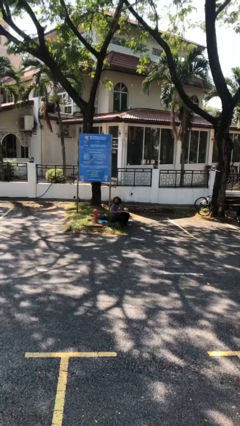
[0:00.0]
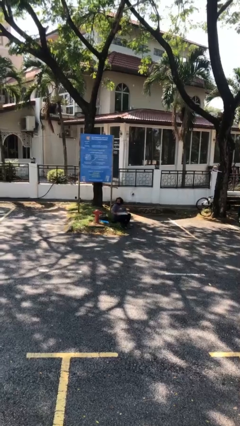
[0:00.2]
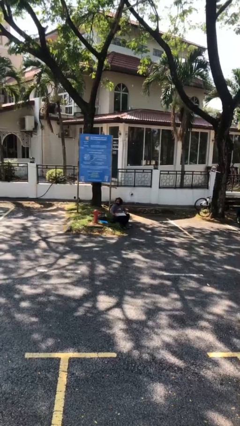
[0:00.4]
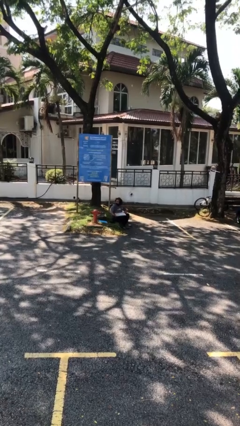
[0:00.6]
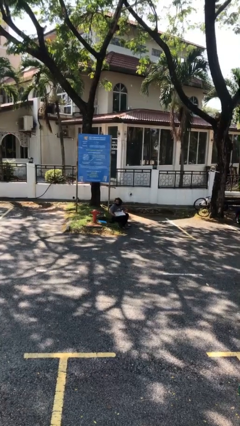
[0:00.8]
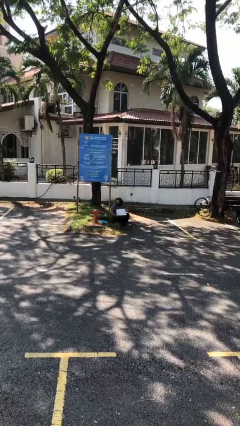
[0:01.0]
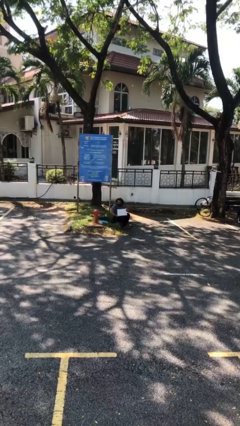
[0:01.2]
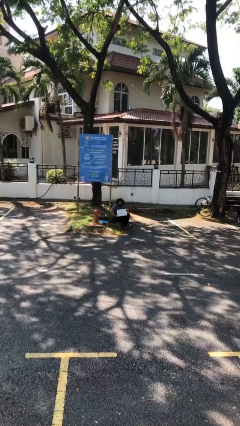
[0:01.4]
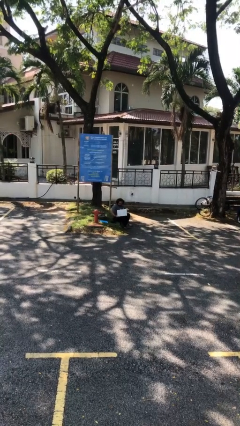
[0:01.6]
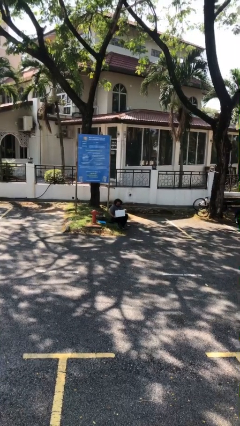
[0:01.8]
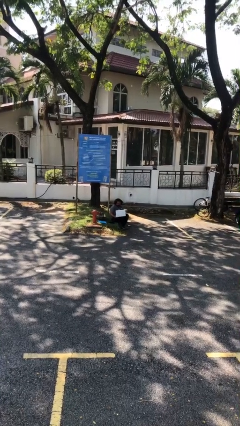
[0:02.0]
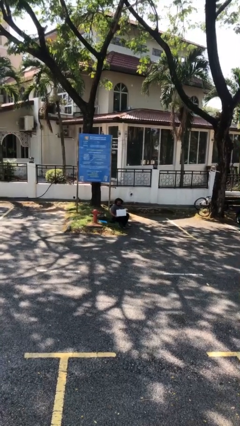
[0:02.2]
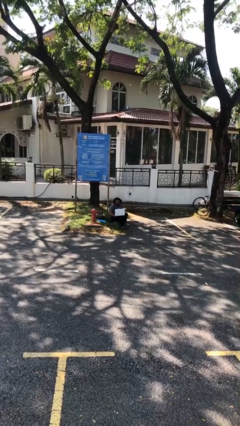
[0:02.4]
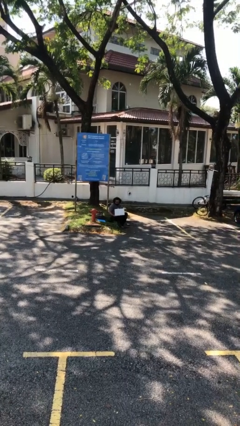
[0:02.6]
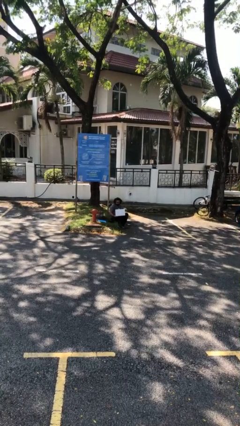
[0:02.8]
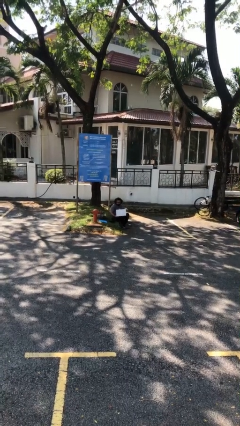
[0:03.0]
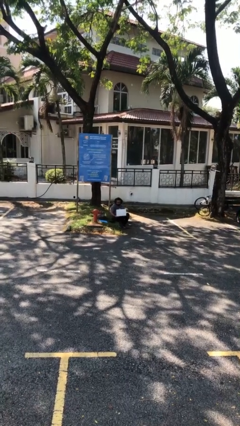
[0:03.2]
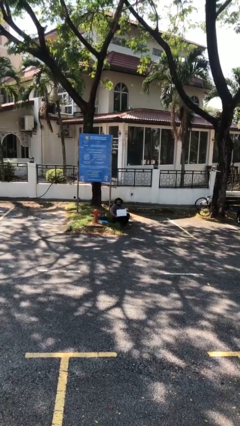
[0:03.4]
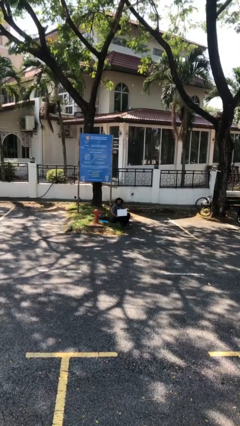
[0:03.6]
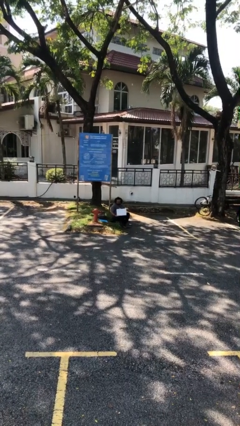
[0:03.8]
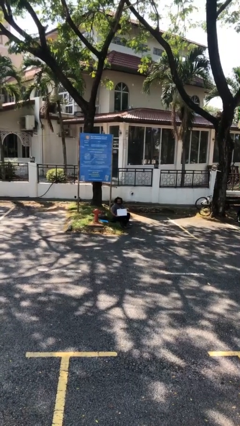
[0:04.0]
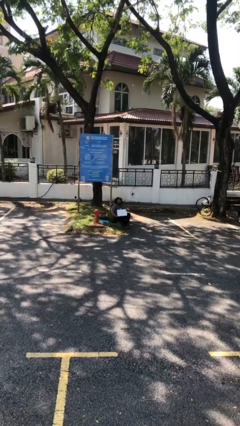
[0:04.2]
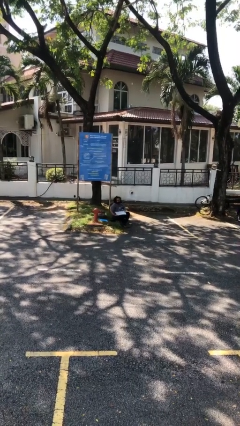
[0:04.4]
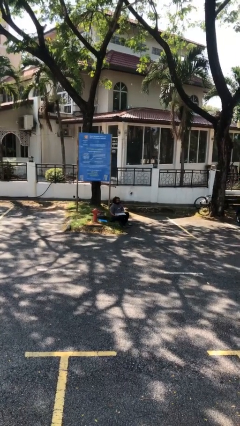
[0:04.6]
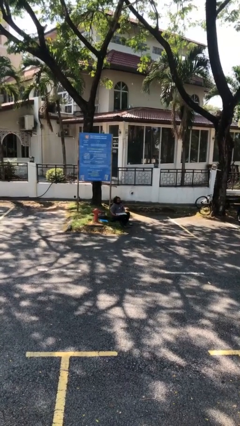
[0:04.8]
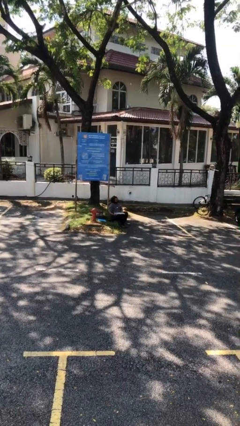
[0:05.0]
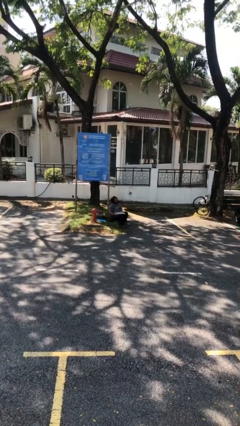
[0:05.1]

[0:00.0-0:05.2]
person interacts with laptop

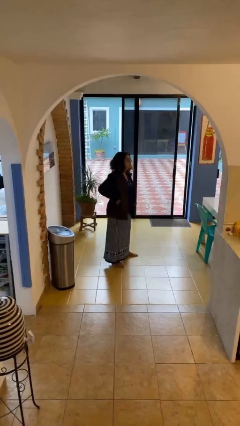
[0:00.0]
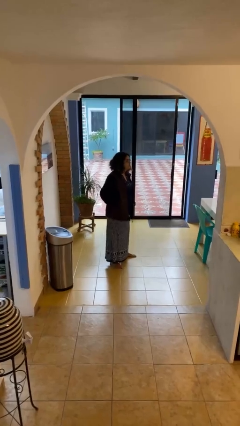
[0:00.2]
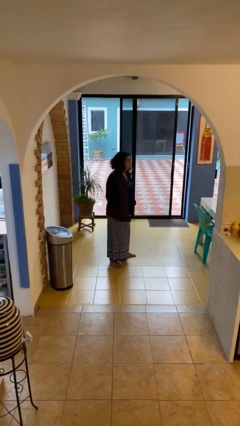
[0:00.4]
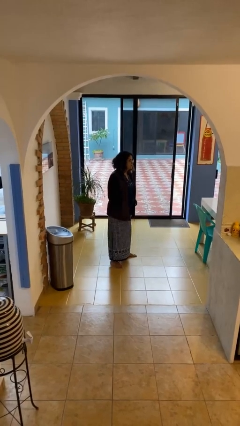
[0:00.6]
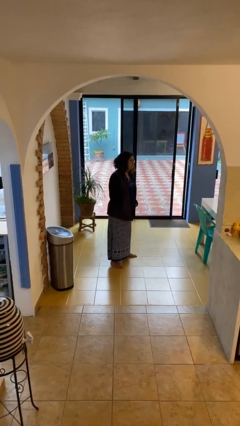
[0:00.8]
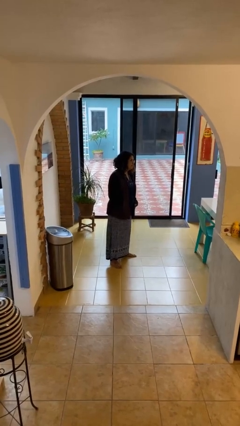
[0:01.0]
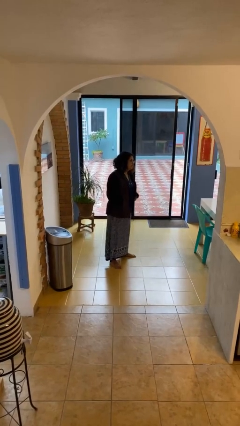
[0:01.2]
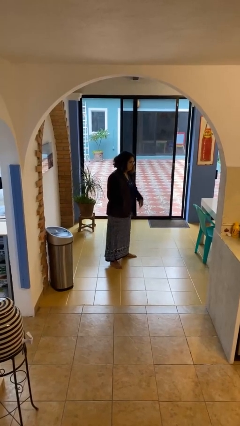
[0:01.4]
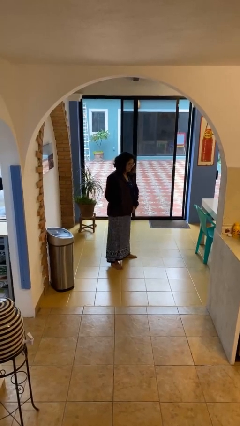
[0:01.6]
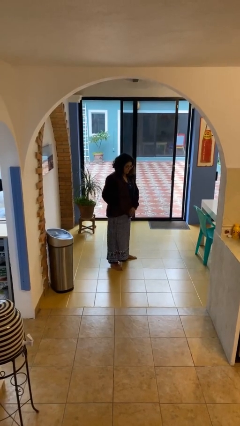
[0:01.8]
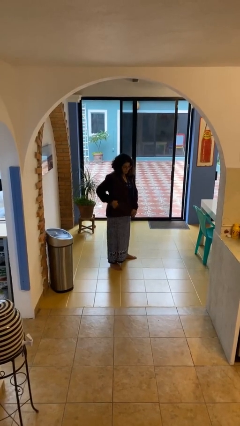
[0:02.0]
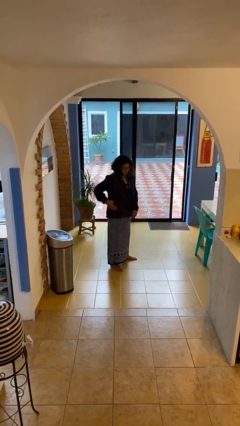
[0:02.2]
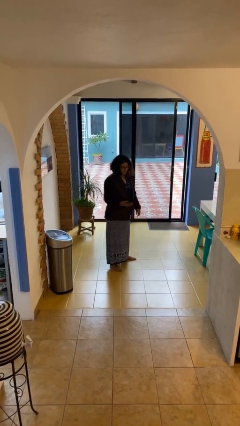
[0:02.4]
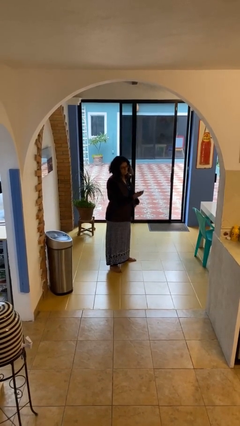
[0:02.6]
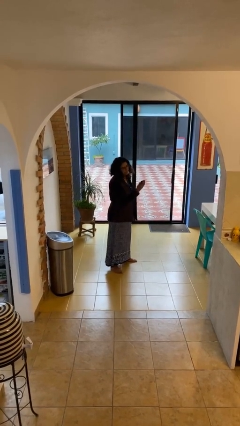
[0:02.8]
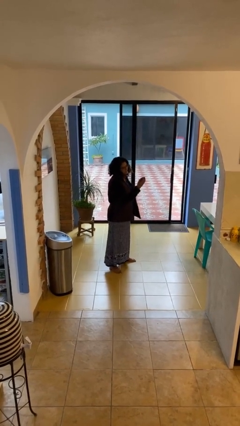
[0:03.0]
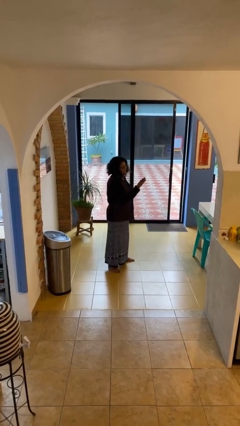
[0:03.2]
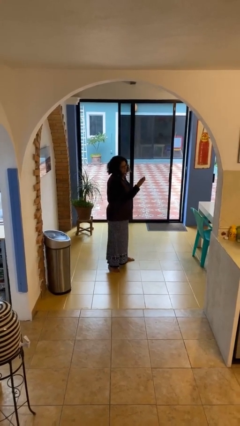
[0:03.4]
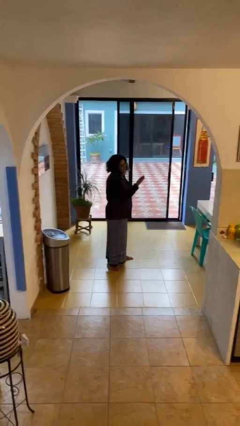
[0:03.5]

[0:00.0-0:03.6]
person takes phone from pocket

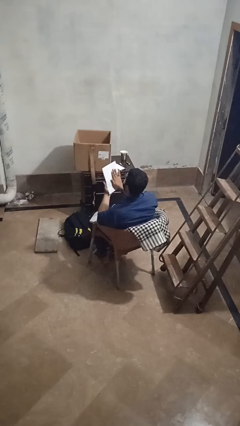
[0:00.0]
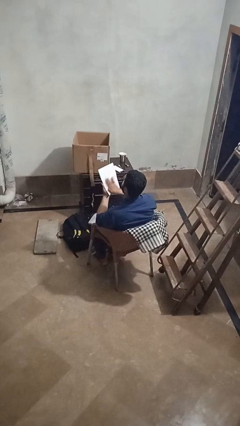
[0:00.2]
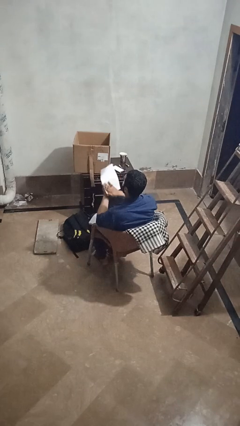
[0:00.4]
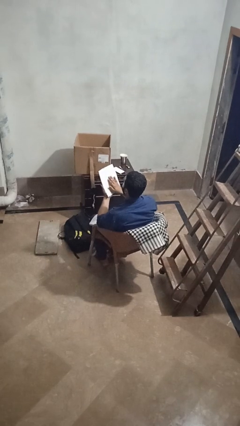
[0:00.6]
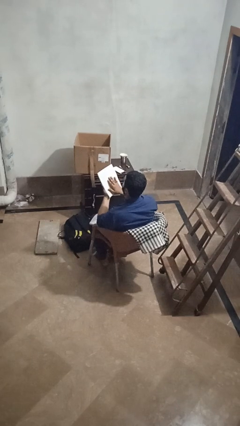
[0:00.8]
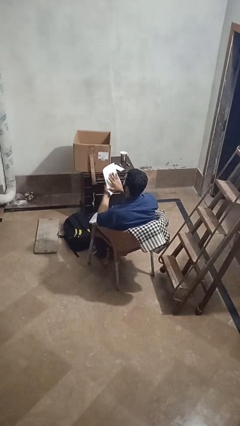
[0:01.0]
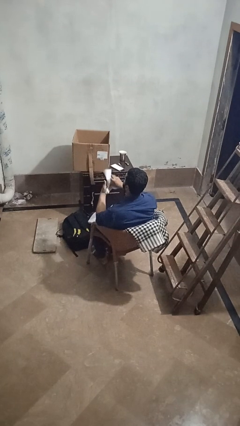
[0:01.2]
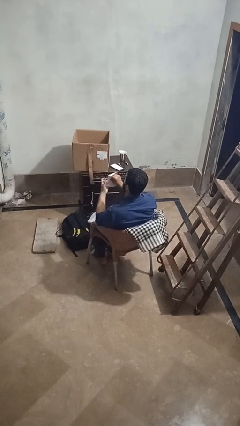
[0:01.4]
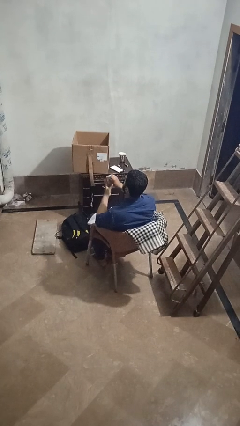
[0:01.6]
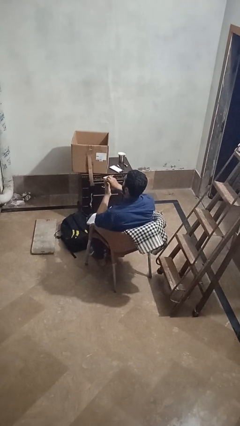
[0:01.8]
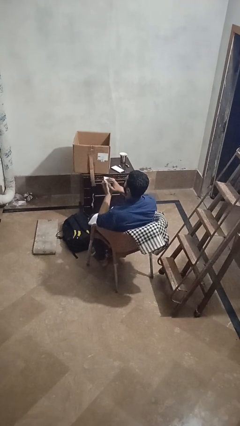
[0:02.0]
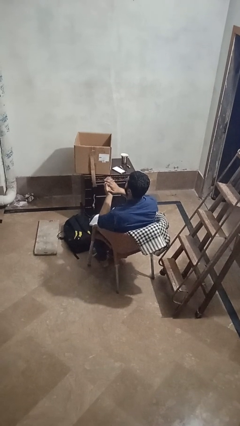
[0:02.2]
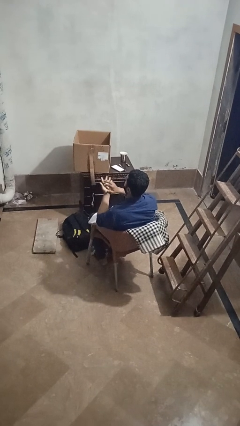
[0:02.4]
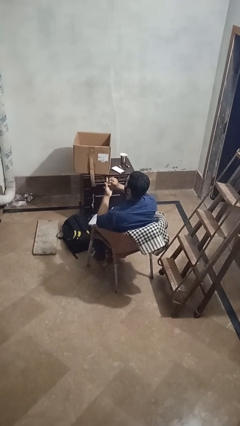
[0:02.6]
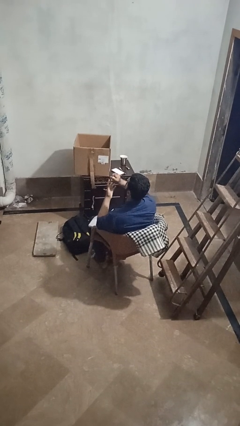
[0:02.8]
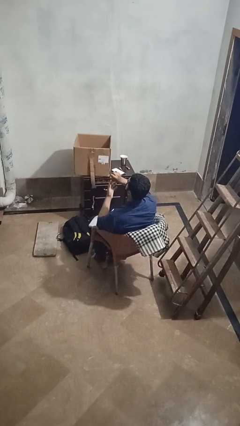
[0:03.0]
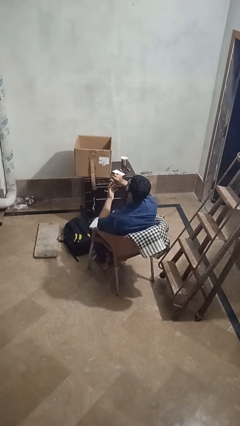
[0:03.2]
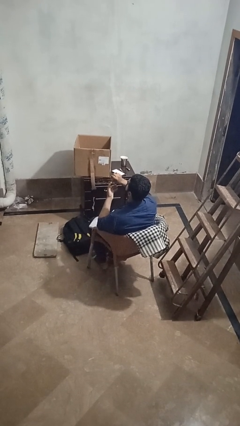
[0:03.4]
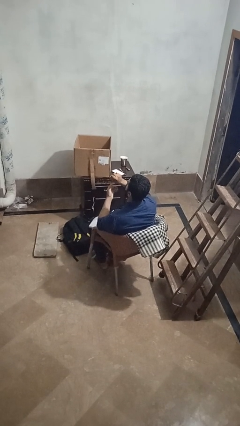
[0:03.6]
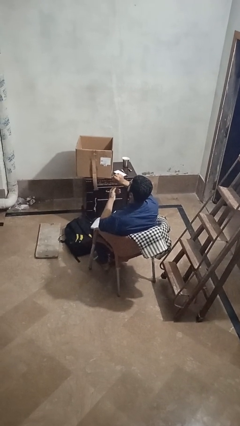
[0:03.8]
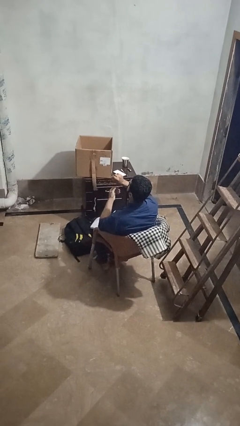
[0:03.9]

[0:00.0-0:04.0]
person crumples paper

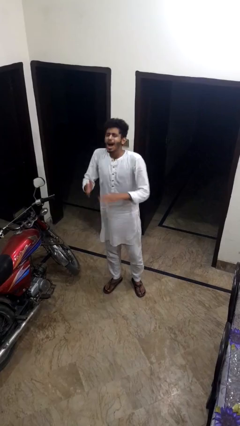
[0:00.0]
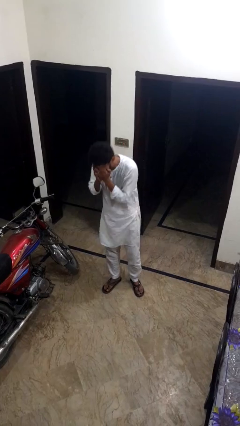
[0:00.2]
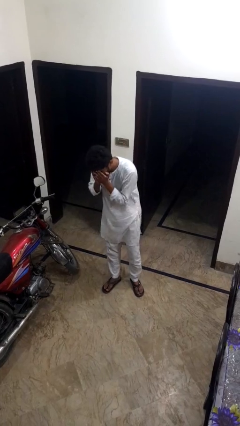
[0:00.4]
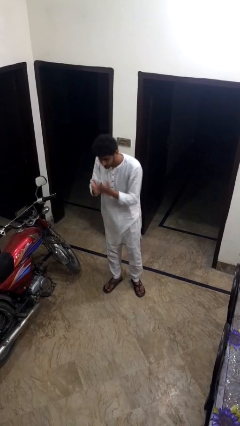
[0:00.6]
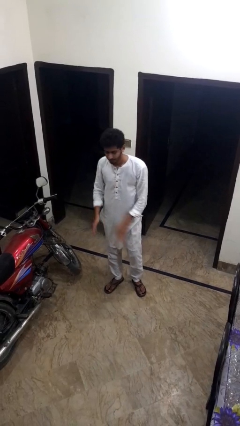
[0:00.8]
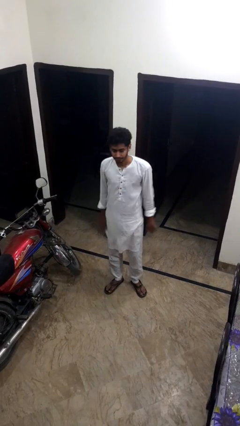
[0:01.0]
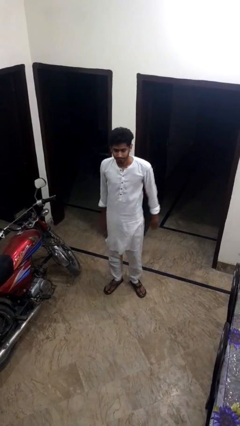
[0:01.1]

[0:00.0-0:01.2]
person sneezes into hand

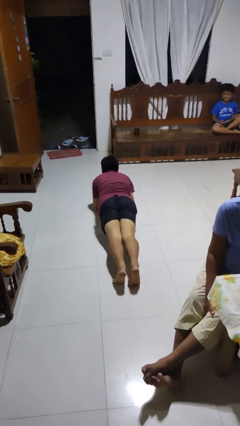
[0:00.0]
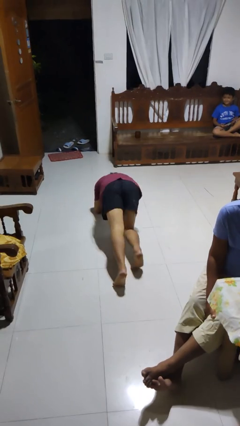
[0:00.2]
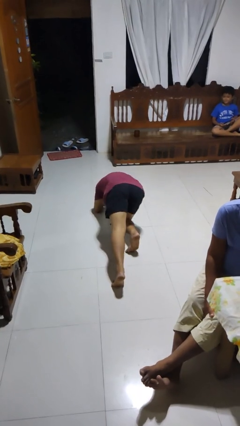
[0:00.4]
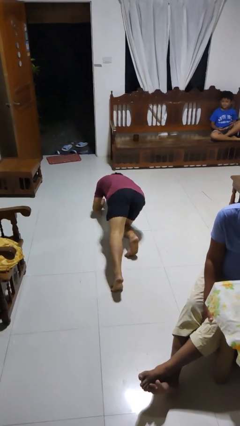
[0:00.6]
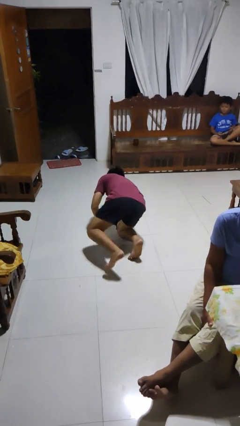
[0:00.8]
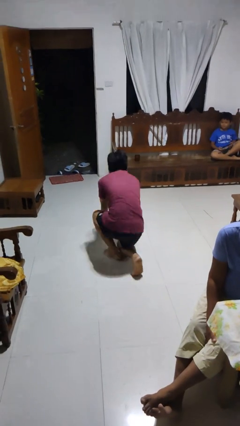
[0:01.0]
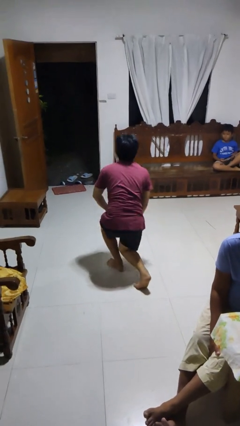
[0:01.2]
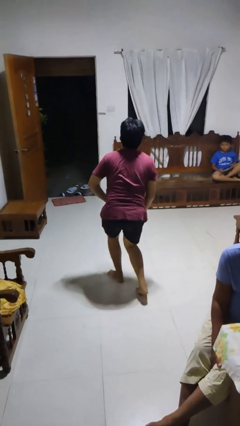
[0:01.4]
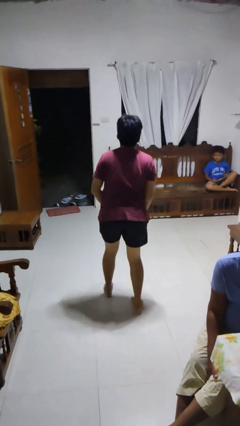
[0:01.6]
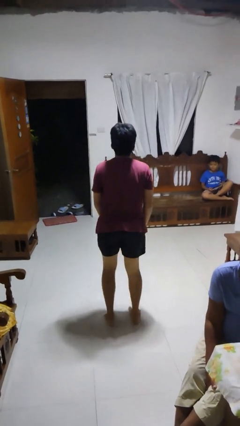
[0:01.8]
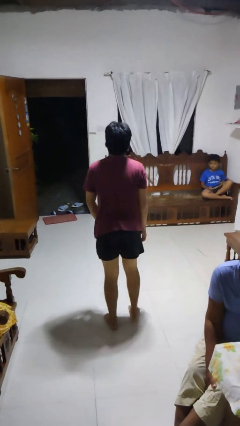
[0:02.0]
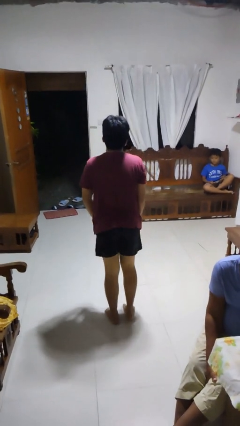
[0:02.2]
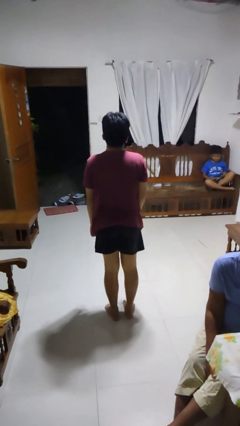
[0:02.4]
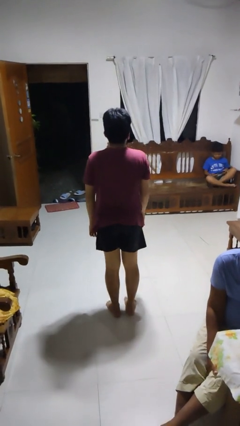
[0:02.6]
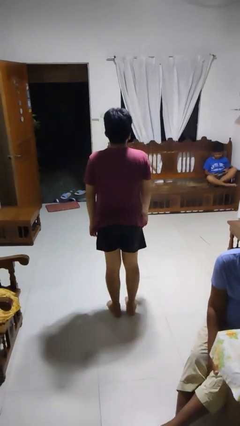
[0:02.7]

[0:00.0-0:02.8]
person stands up from floor

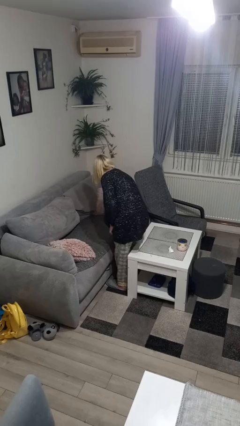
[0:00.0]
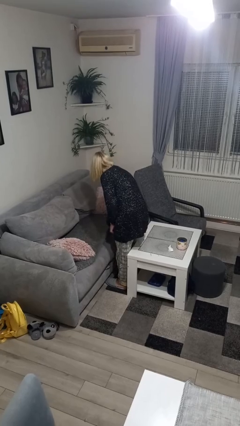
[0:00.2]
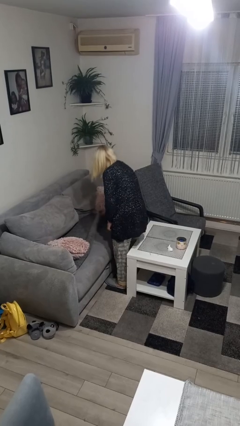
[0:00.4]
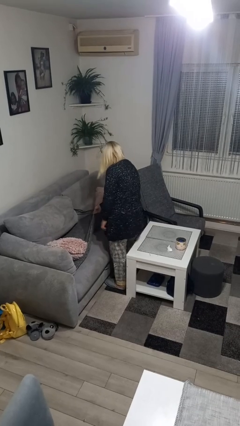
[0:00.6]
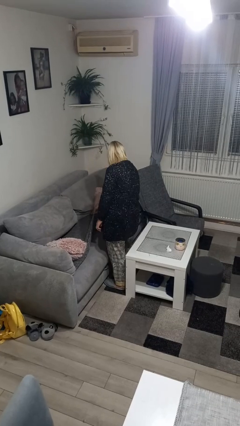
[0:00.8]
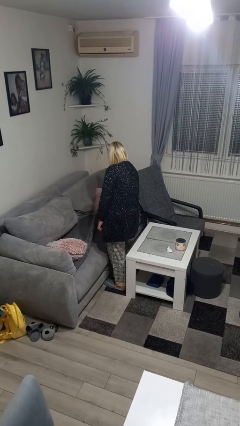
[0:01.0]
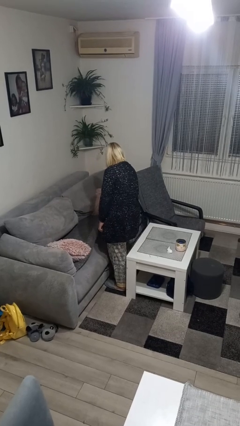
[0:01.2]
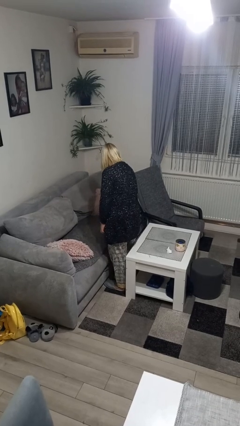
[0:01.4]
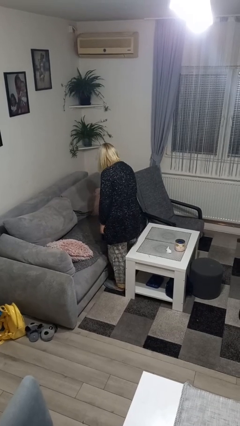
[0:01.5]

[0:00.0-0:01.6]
person searches in couch
